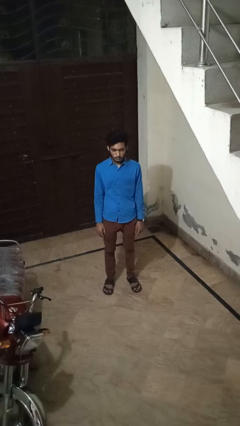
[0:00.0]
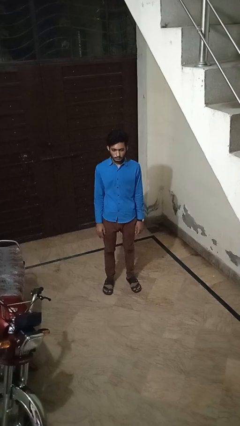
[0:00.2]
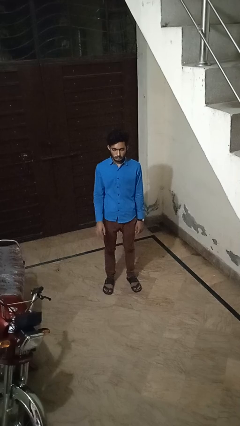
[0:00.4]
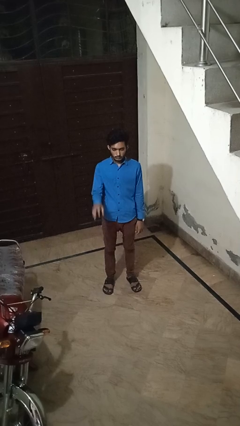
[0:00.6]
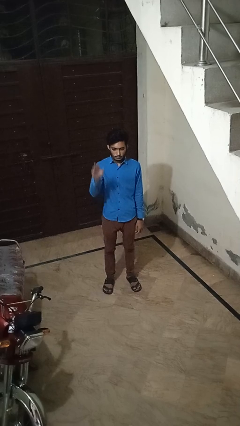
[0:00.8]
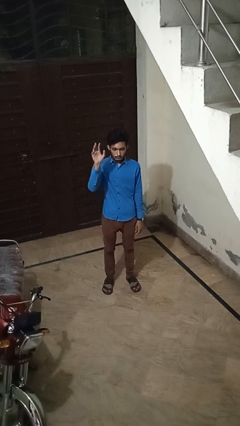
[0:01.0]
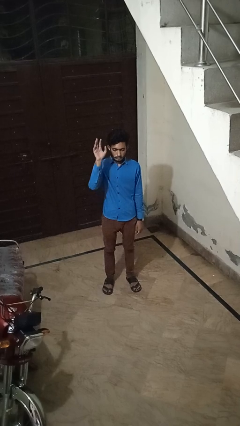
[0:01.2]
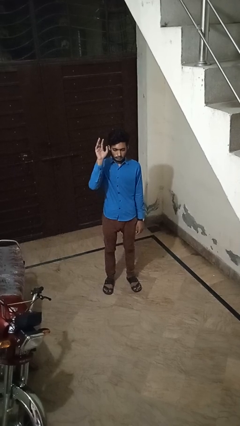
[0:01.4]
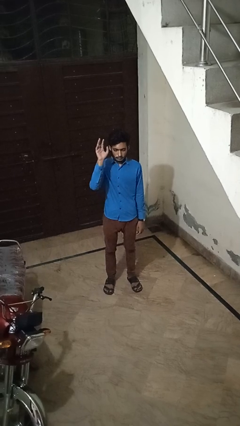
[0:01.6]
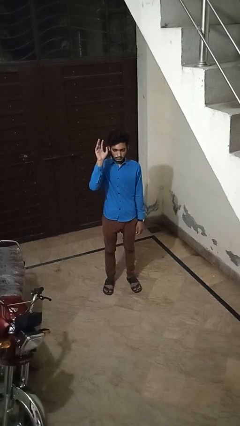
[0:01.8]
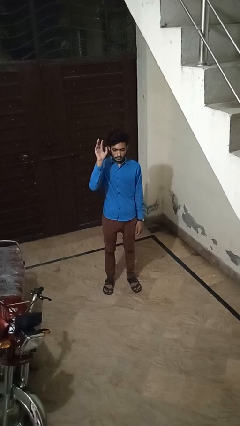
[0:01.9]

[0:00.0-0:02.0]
person gestures raise hand

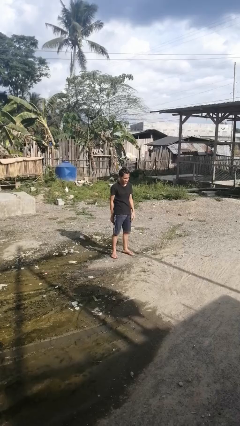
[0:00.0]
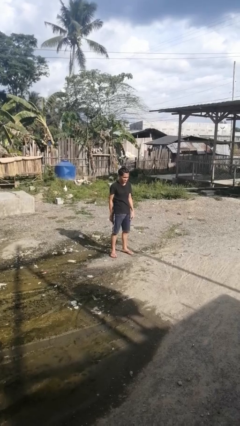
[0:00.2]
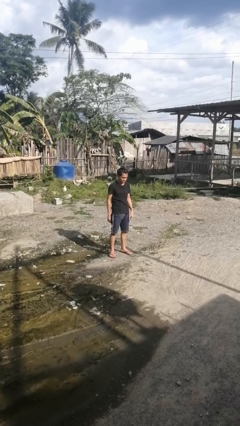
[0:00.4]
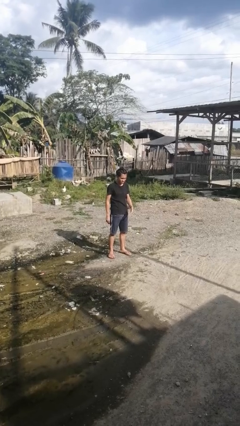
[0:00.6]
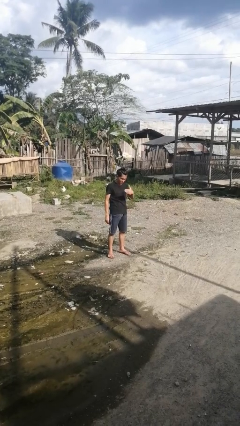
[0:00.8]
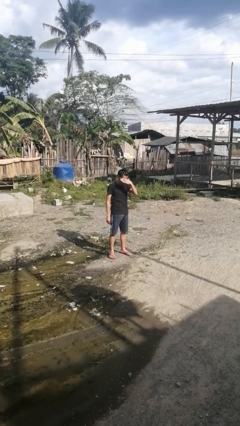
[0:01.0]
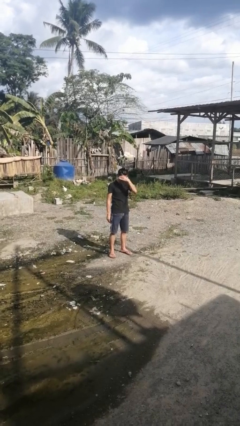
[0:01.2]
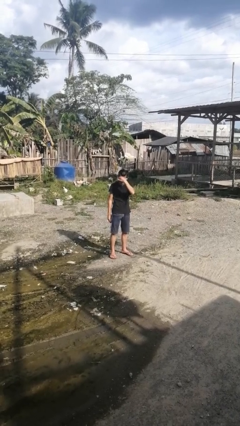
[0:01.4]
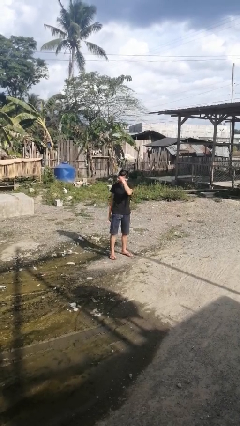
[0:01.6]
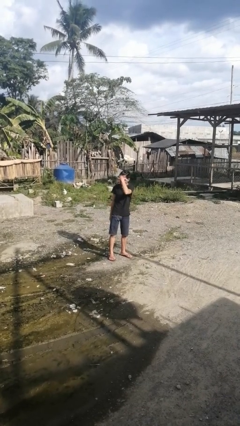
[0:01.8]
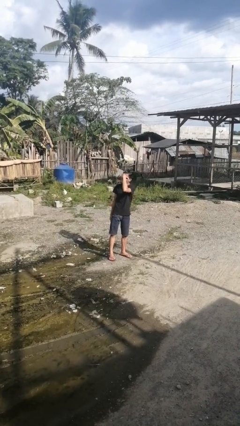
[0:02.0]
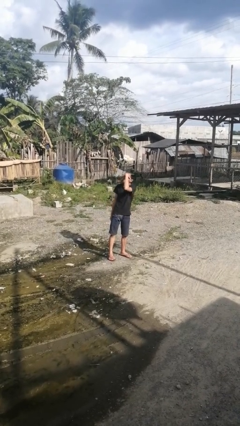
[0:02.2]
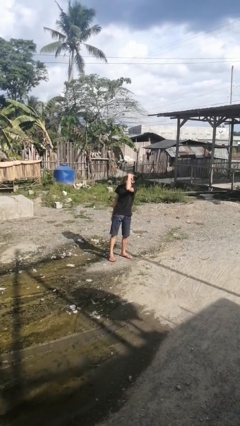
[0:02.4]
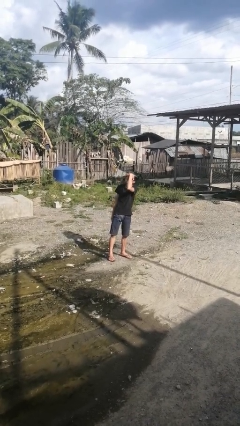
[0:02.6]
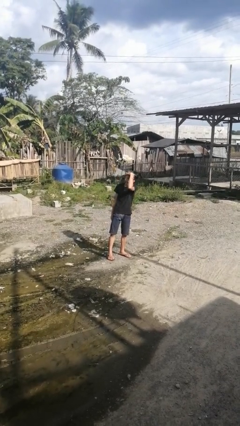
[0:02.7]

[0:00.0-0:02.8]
person shades eyes

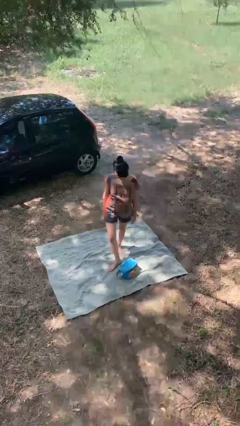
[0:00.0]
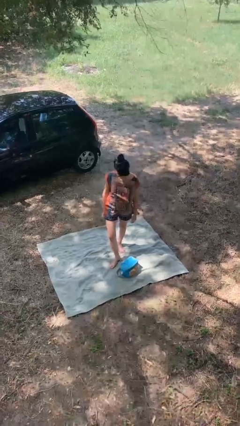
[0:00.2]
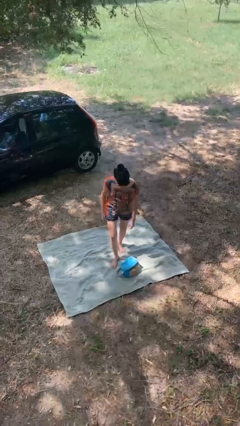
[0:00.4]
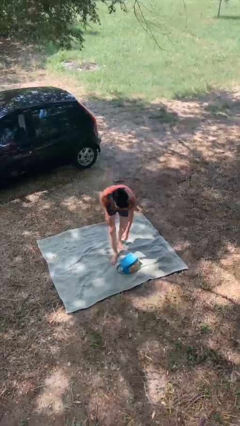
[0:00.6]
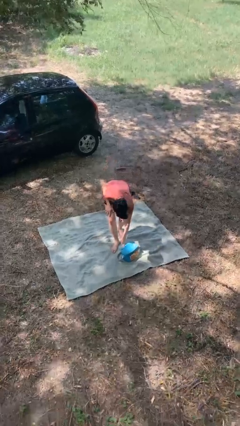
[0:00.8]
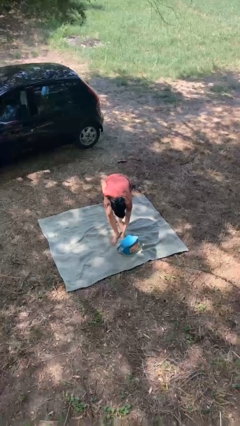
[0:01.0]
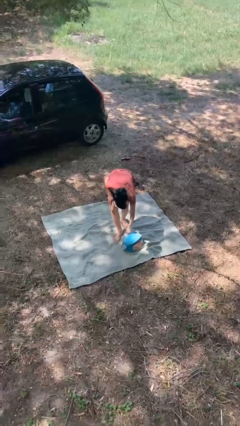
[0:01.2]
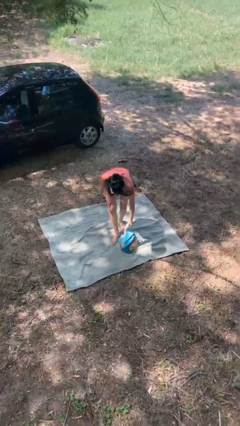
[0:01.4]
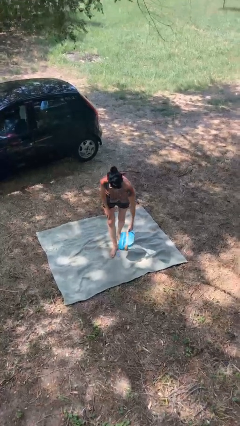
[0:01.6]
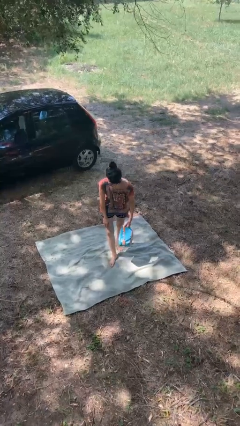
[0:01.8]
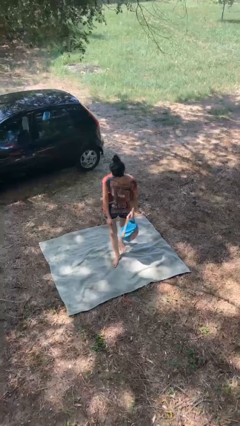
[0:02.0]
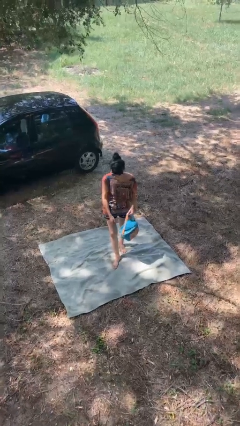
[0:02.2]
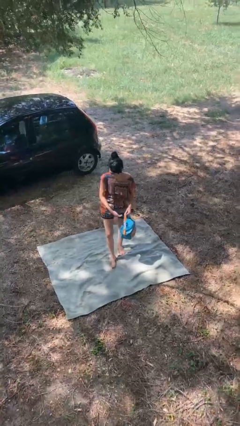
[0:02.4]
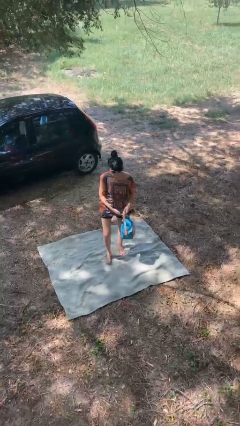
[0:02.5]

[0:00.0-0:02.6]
person picks up object from floor

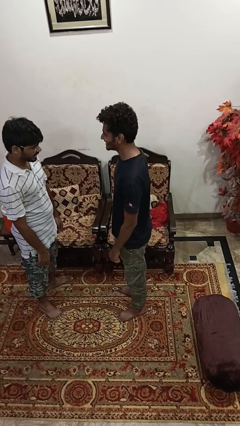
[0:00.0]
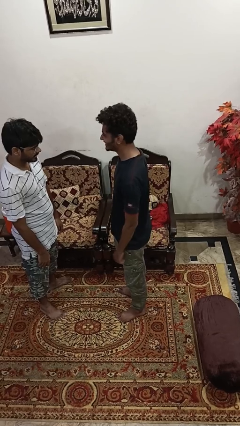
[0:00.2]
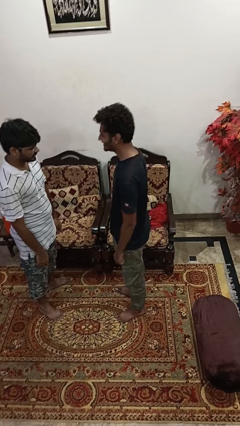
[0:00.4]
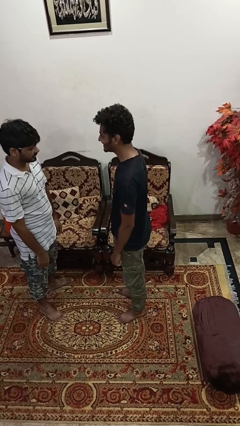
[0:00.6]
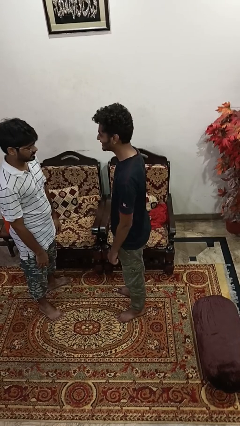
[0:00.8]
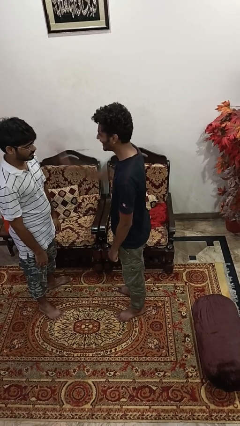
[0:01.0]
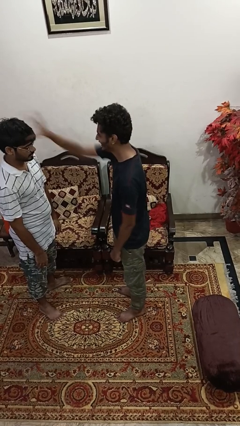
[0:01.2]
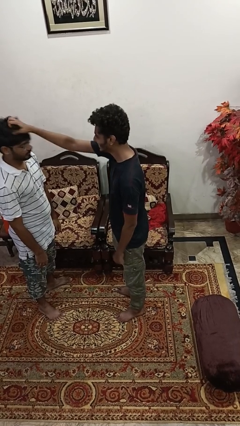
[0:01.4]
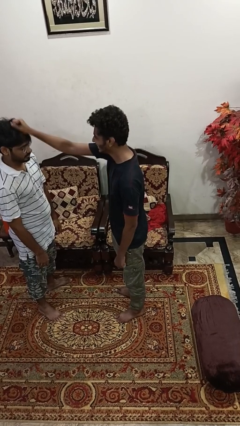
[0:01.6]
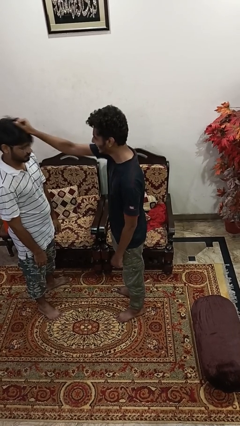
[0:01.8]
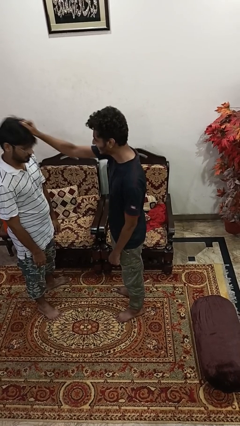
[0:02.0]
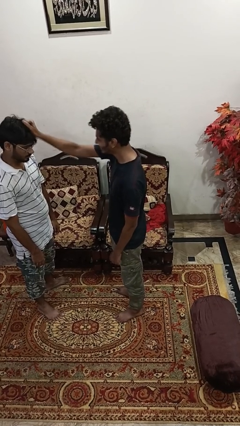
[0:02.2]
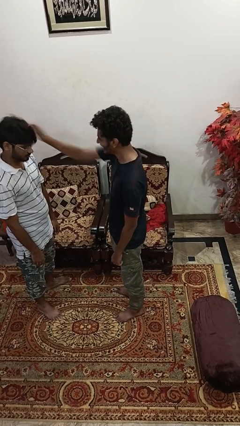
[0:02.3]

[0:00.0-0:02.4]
person spins person around

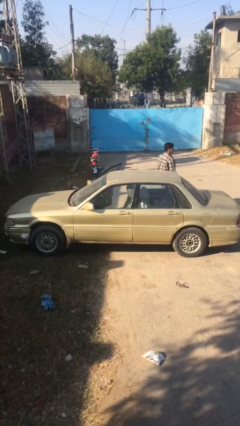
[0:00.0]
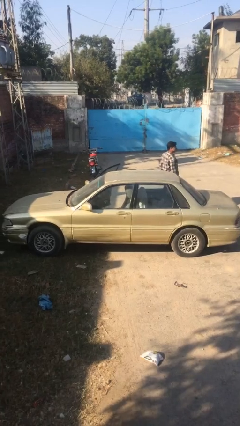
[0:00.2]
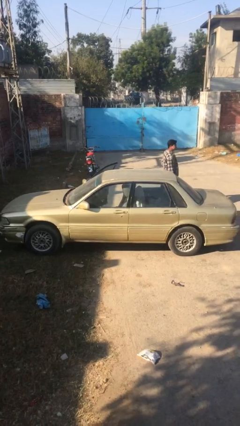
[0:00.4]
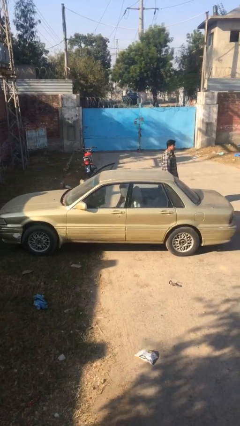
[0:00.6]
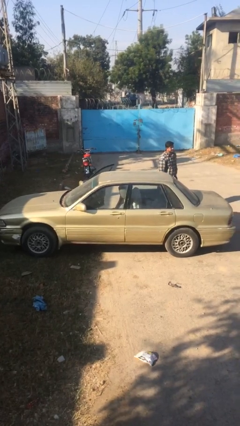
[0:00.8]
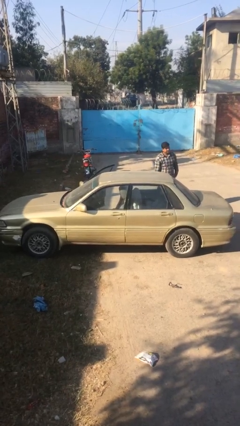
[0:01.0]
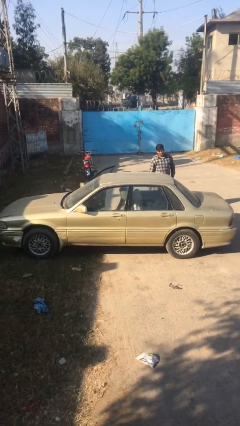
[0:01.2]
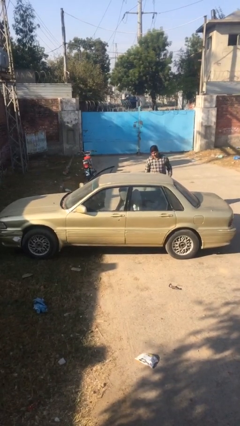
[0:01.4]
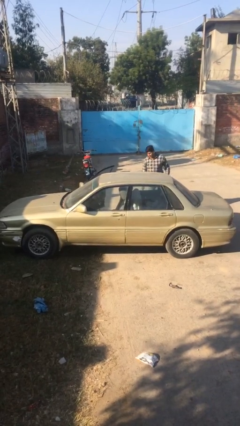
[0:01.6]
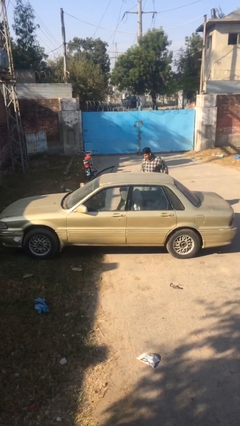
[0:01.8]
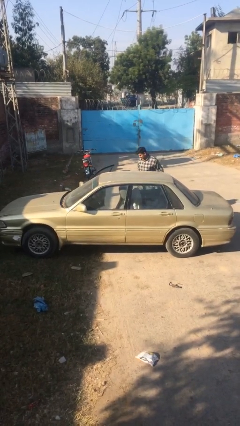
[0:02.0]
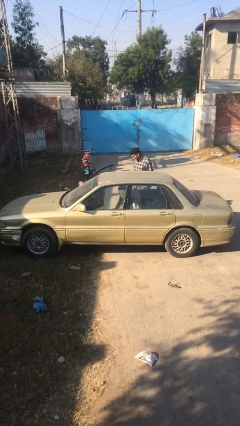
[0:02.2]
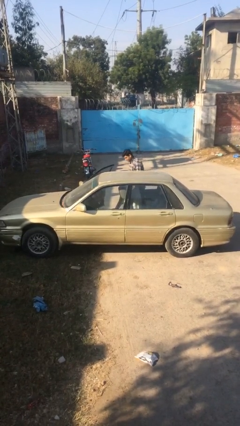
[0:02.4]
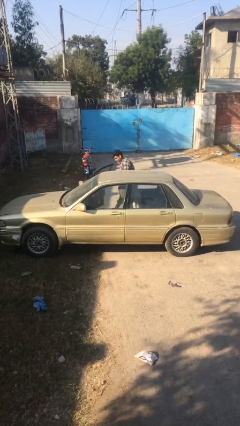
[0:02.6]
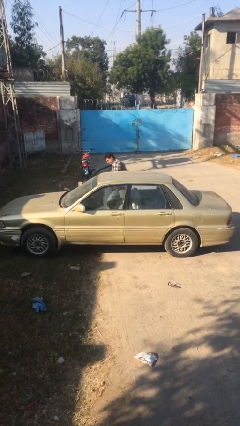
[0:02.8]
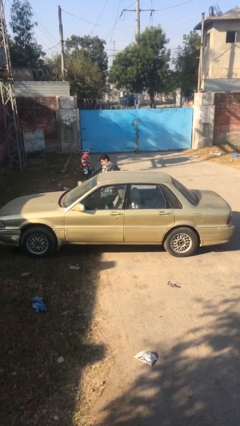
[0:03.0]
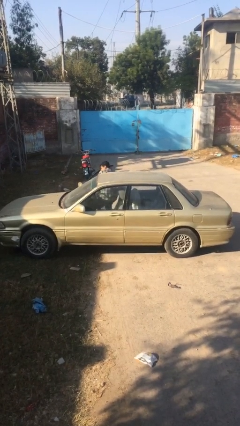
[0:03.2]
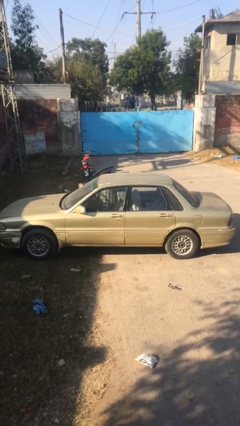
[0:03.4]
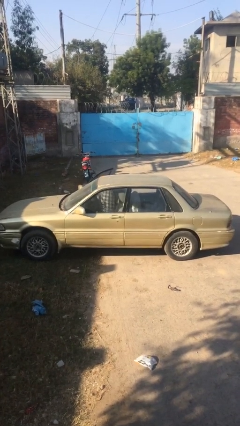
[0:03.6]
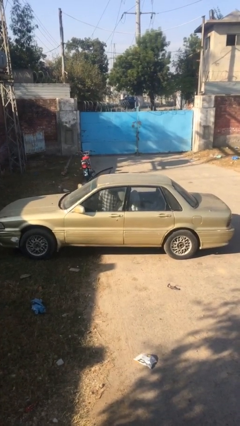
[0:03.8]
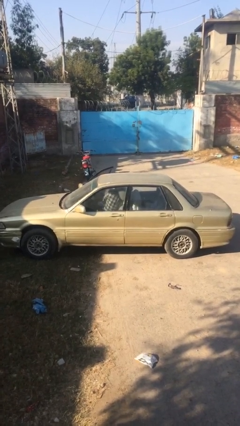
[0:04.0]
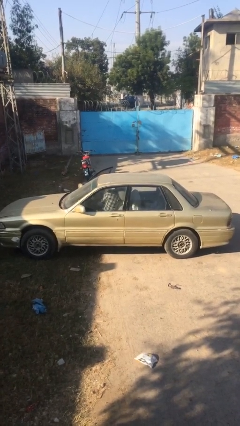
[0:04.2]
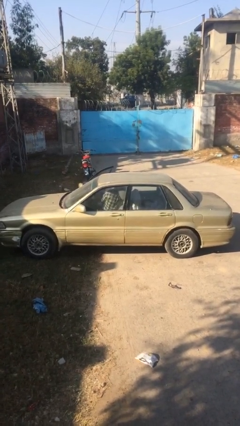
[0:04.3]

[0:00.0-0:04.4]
person enters car

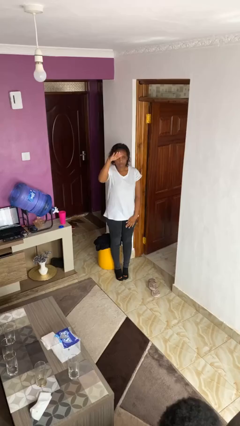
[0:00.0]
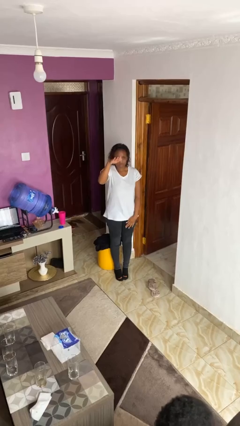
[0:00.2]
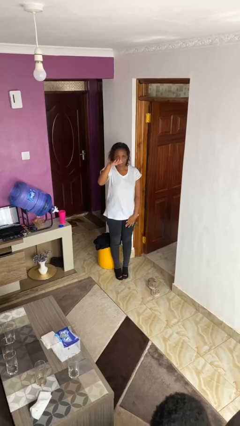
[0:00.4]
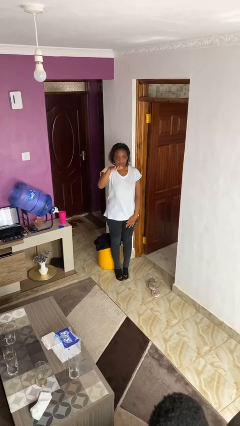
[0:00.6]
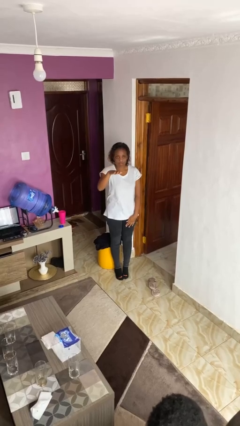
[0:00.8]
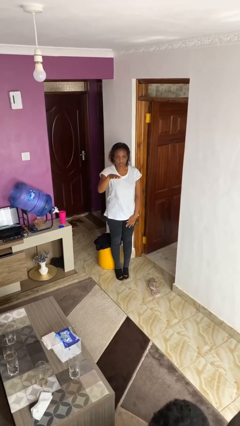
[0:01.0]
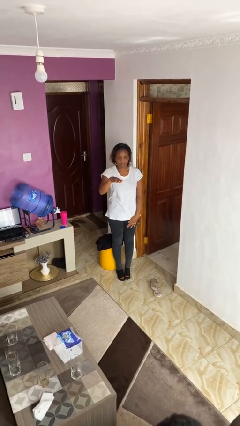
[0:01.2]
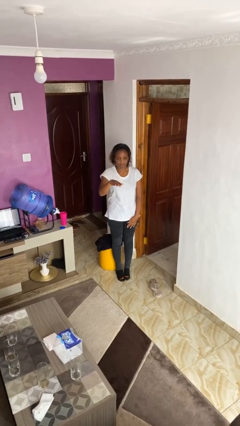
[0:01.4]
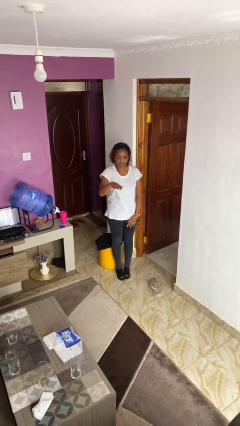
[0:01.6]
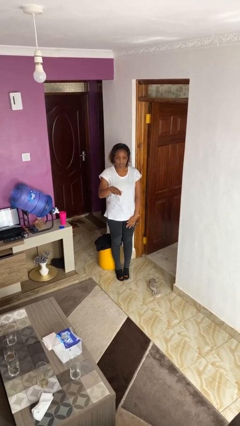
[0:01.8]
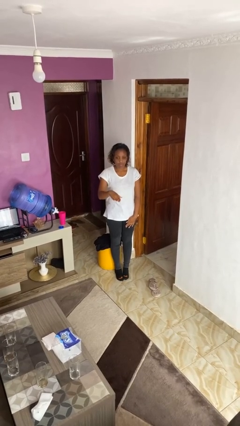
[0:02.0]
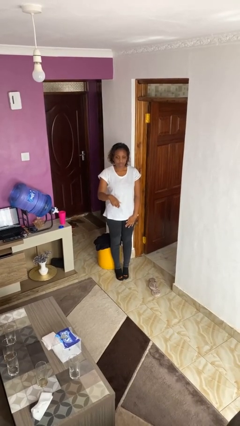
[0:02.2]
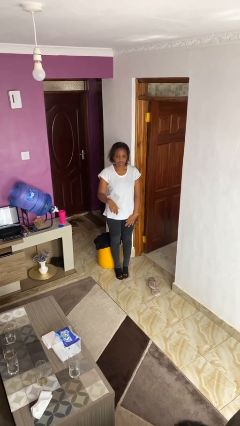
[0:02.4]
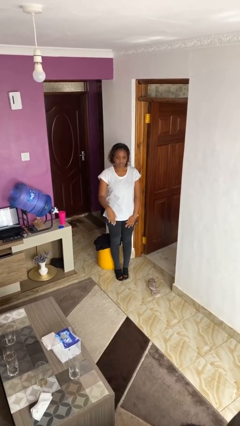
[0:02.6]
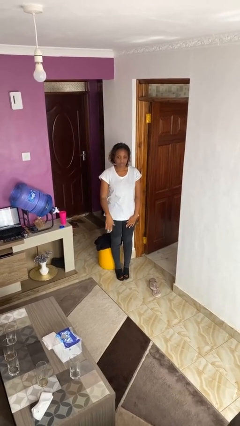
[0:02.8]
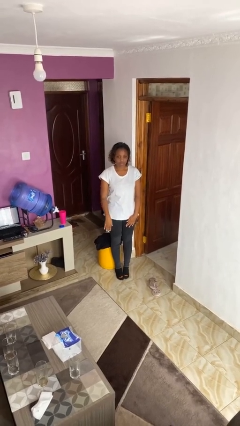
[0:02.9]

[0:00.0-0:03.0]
person gestures swipe down
